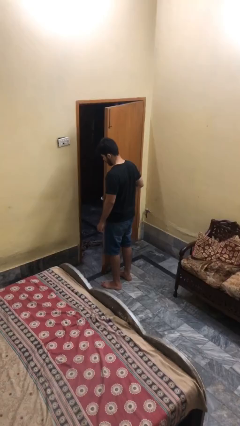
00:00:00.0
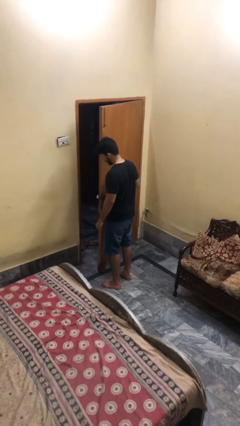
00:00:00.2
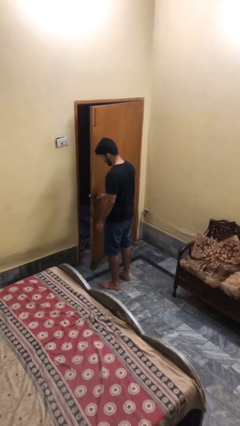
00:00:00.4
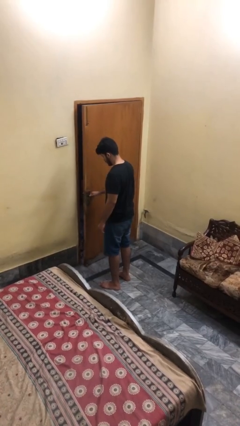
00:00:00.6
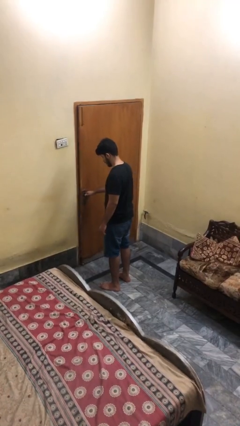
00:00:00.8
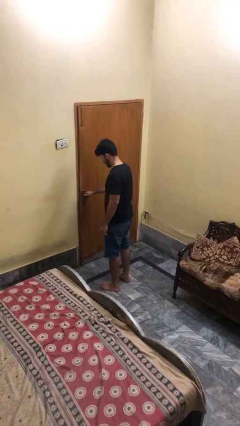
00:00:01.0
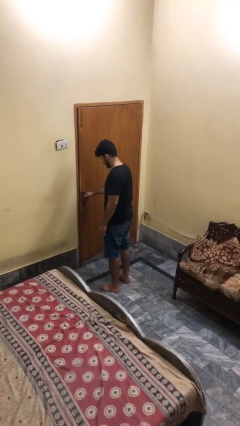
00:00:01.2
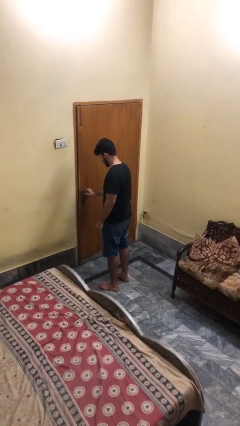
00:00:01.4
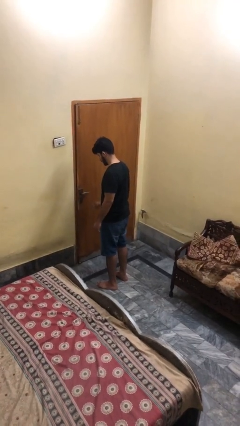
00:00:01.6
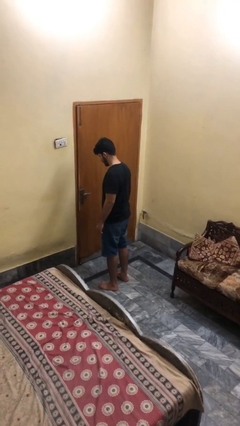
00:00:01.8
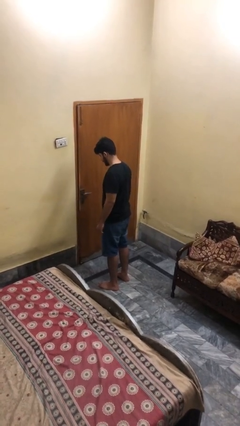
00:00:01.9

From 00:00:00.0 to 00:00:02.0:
person closes facility door

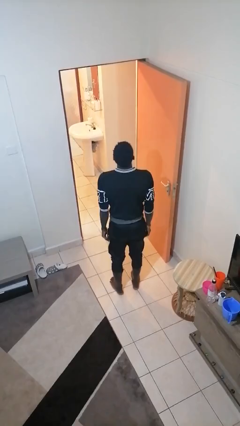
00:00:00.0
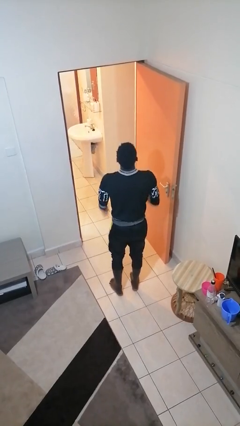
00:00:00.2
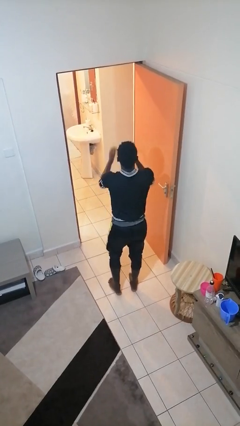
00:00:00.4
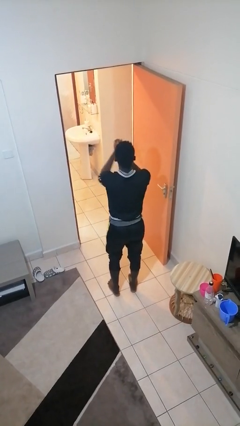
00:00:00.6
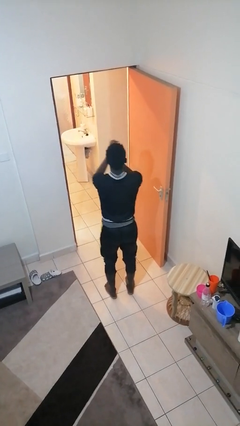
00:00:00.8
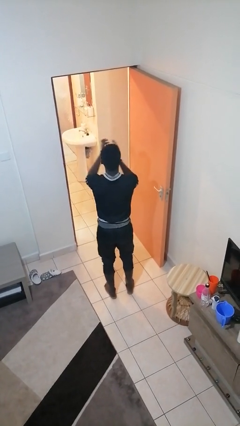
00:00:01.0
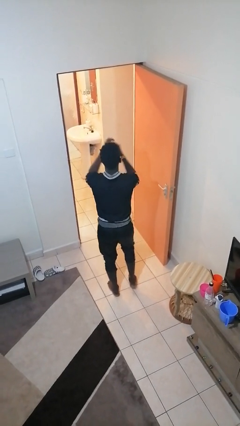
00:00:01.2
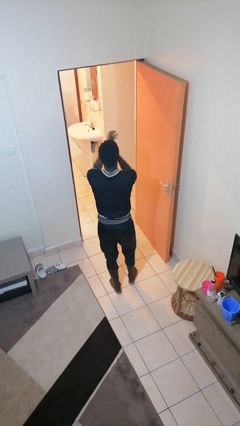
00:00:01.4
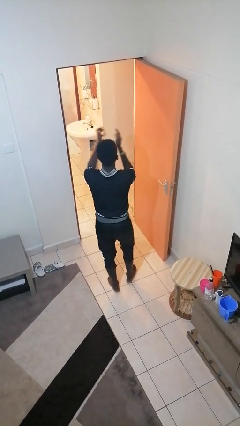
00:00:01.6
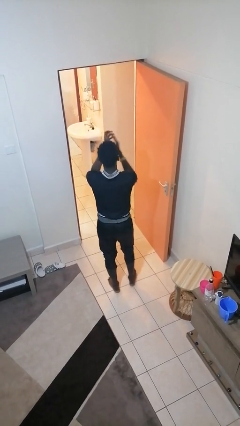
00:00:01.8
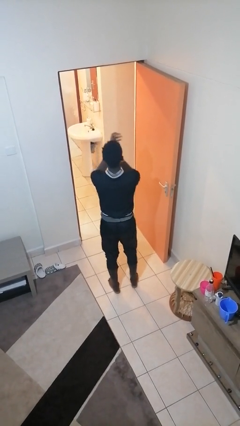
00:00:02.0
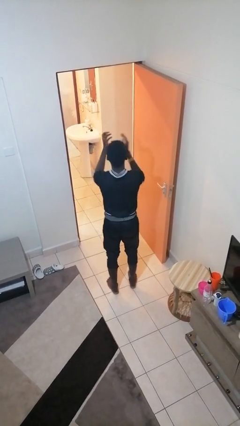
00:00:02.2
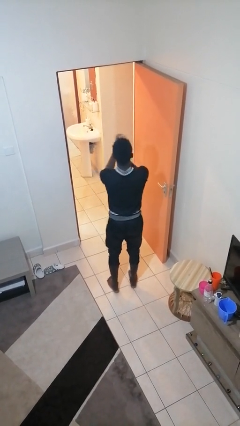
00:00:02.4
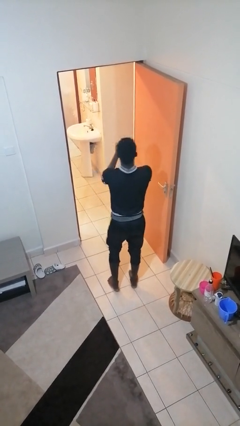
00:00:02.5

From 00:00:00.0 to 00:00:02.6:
person claps hands

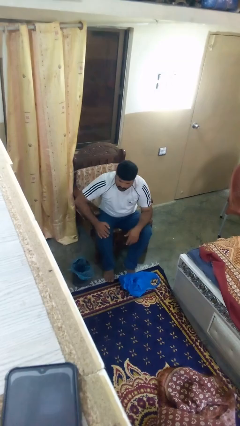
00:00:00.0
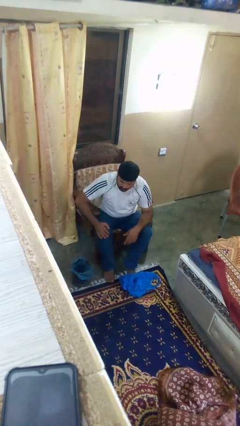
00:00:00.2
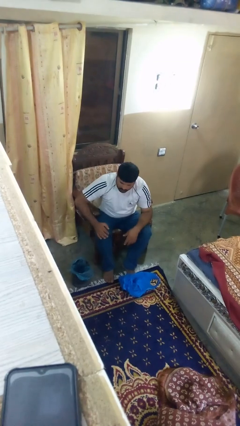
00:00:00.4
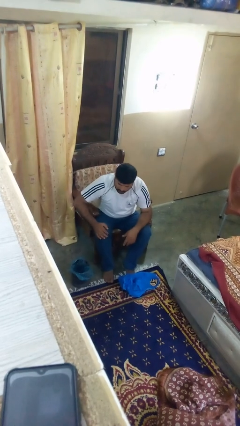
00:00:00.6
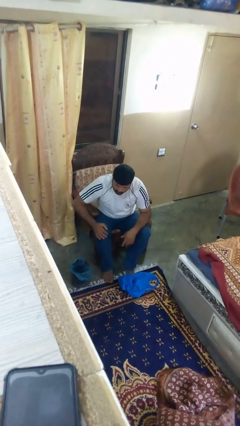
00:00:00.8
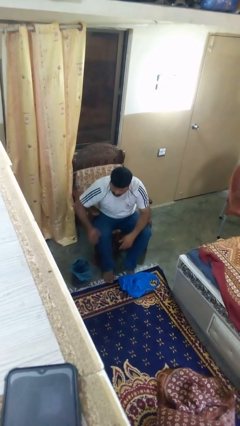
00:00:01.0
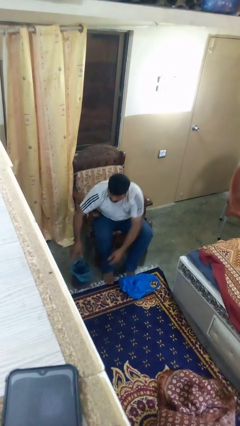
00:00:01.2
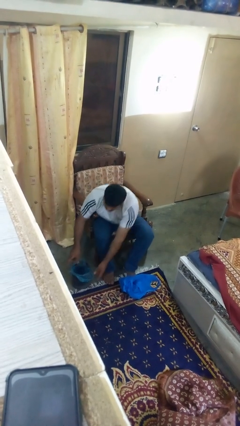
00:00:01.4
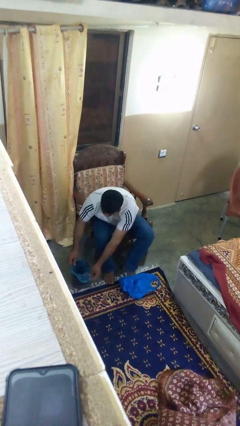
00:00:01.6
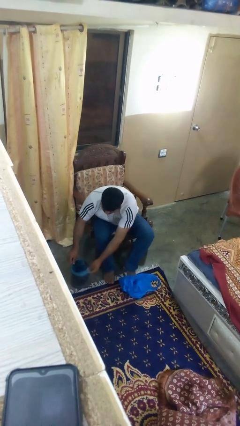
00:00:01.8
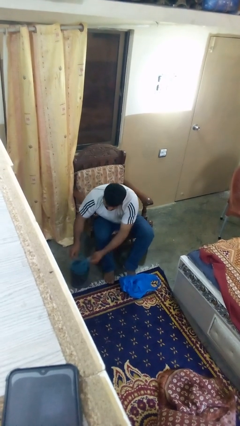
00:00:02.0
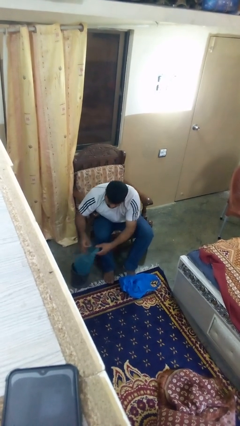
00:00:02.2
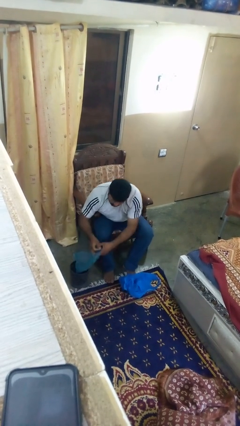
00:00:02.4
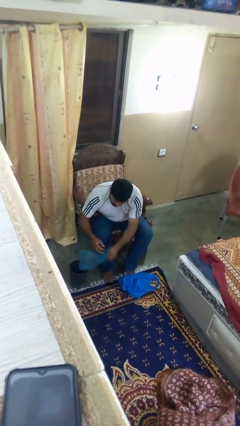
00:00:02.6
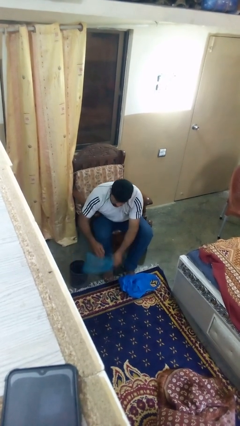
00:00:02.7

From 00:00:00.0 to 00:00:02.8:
person removes trashbag from trashcan

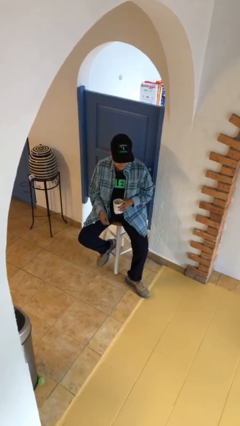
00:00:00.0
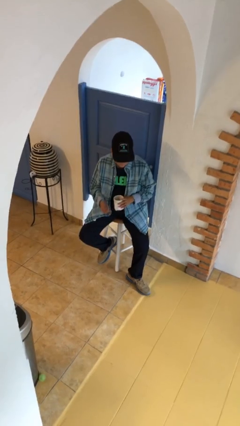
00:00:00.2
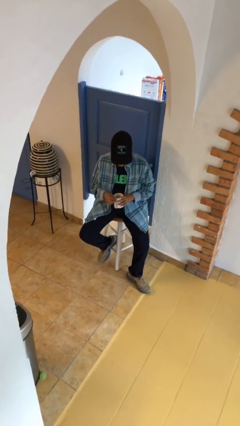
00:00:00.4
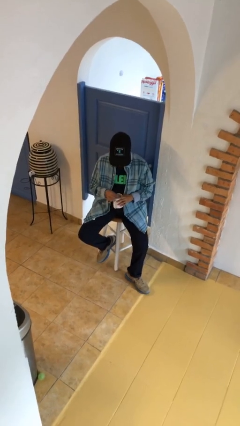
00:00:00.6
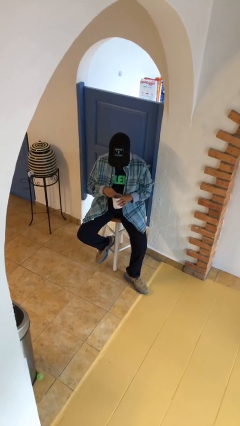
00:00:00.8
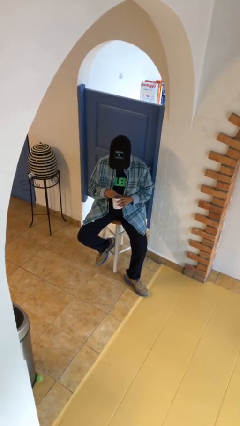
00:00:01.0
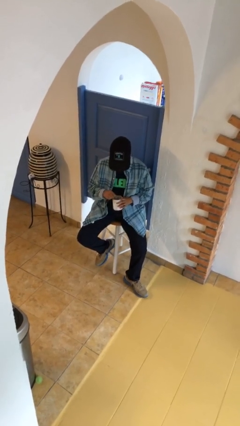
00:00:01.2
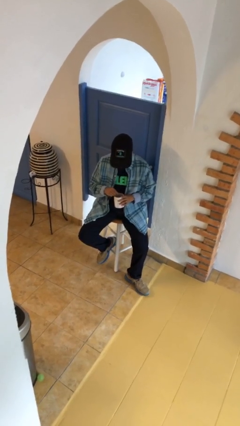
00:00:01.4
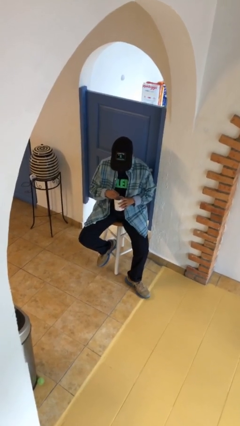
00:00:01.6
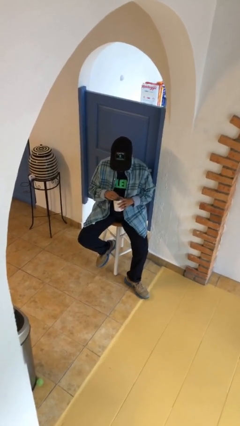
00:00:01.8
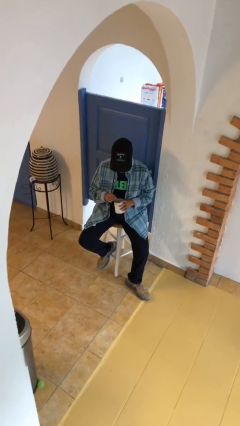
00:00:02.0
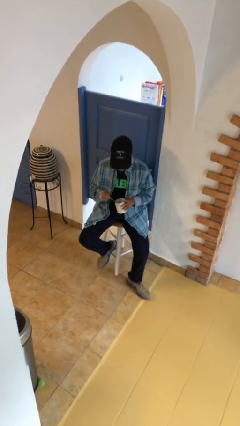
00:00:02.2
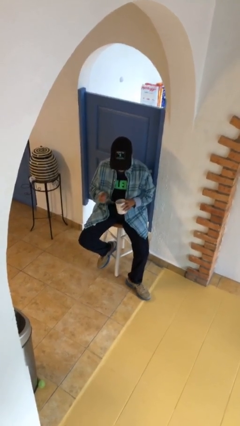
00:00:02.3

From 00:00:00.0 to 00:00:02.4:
person stirs mug

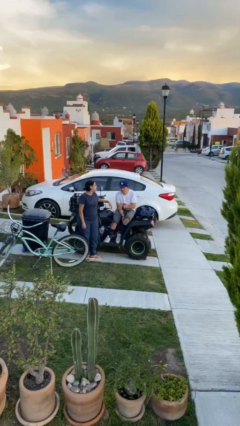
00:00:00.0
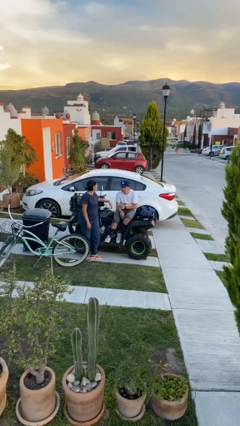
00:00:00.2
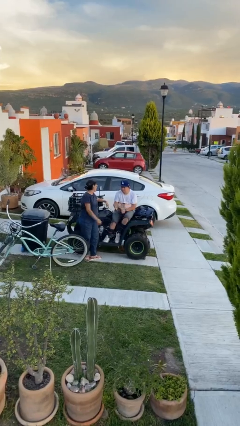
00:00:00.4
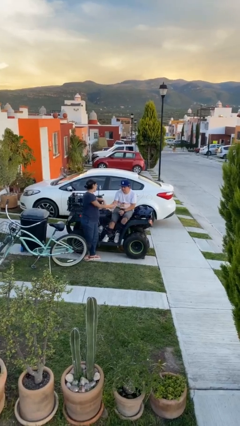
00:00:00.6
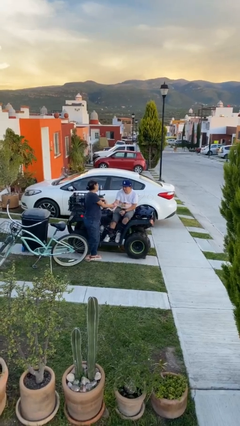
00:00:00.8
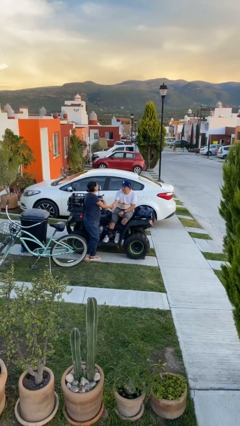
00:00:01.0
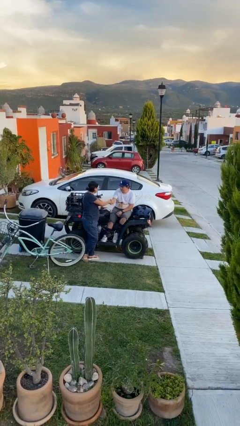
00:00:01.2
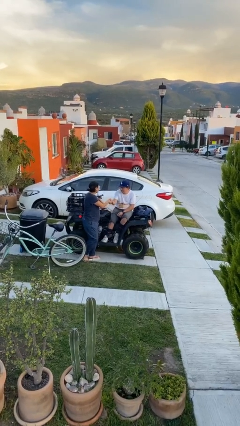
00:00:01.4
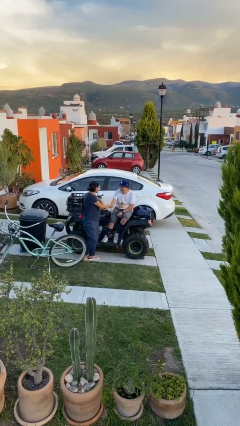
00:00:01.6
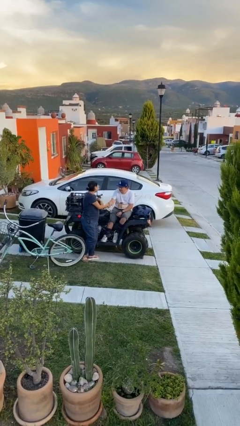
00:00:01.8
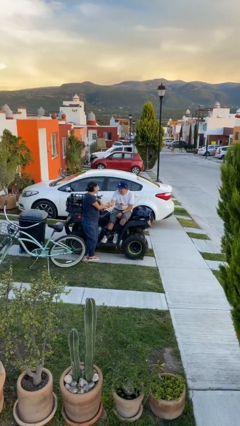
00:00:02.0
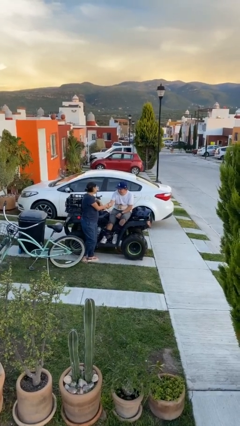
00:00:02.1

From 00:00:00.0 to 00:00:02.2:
person shakes hand

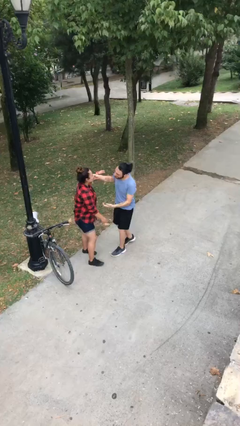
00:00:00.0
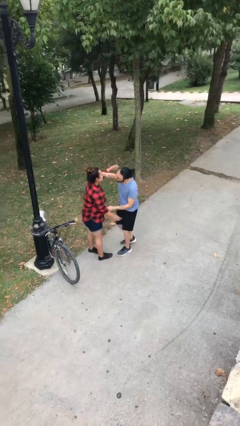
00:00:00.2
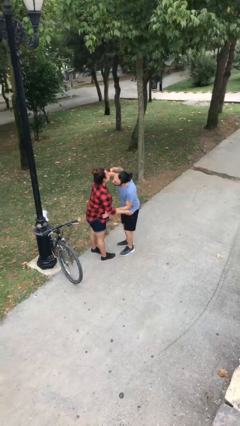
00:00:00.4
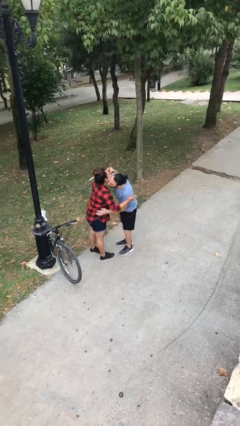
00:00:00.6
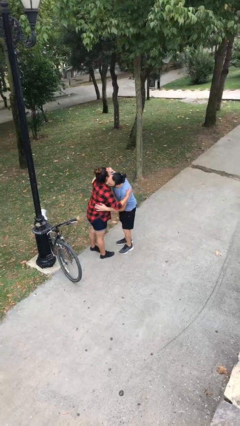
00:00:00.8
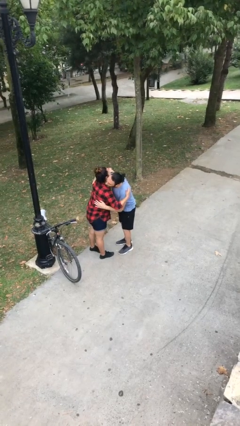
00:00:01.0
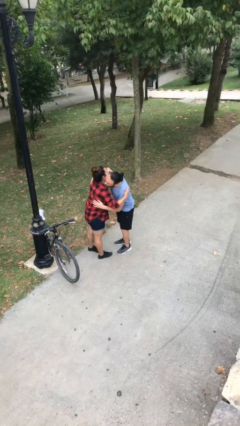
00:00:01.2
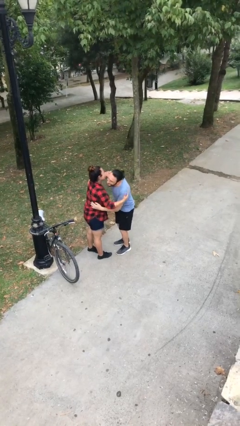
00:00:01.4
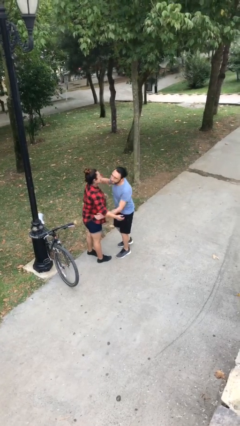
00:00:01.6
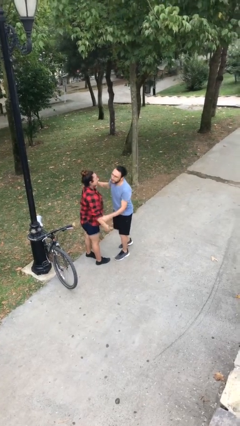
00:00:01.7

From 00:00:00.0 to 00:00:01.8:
person embraces person

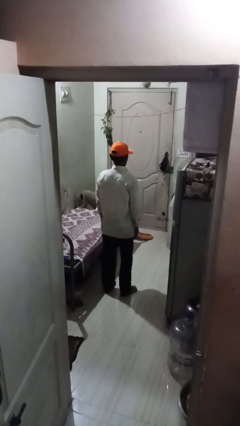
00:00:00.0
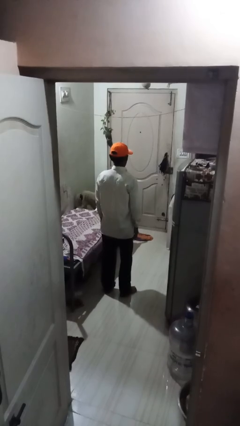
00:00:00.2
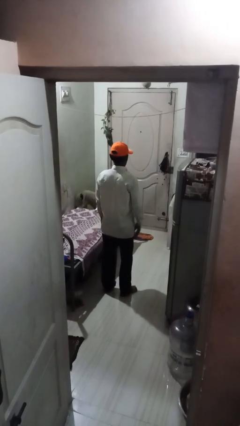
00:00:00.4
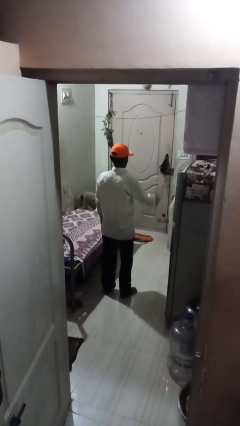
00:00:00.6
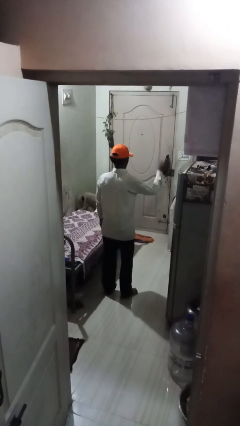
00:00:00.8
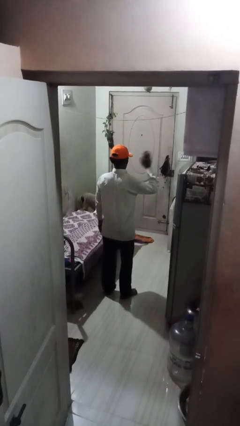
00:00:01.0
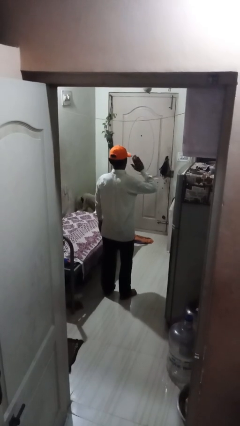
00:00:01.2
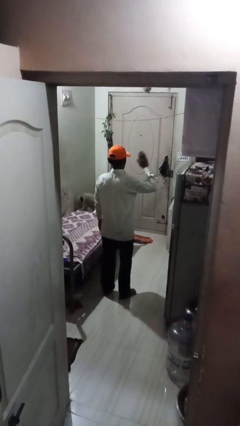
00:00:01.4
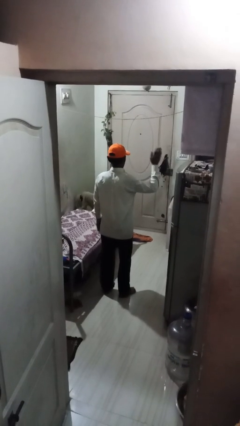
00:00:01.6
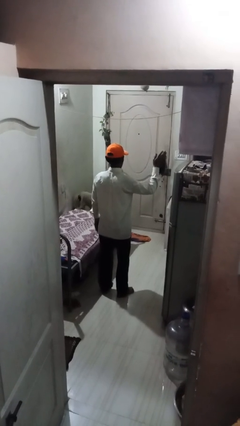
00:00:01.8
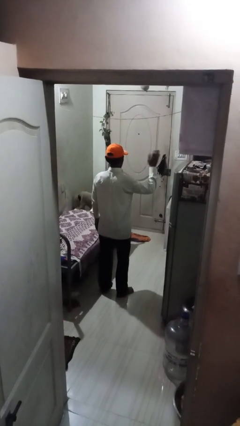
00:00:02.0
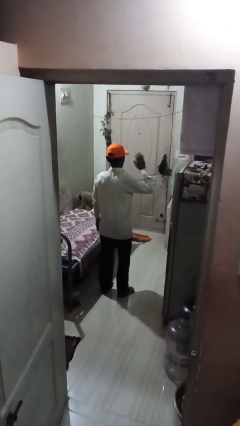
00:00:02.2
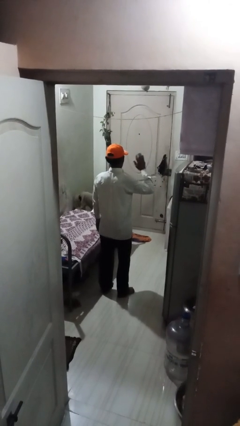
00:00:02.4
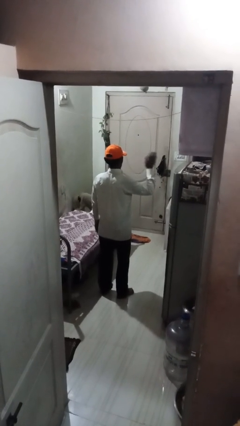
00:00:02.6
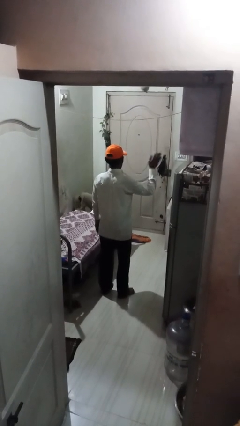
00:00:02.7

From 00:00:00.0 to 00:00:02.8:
person waves at person

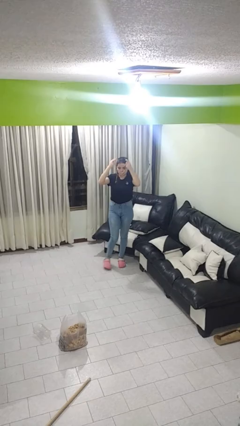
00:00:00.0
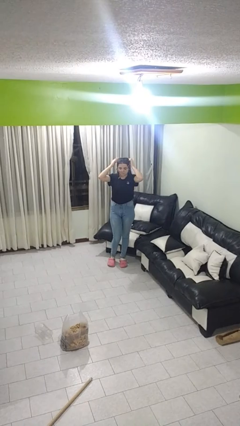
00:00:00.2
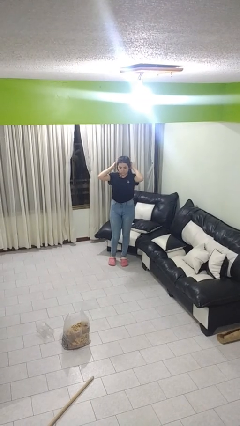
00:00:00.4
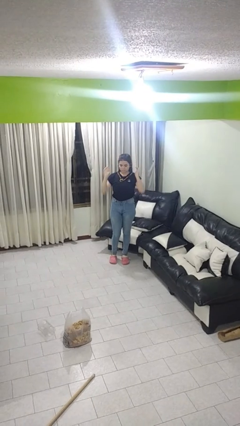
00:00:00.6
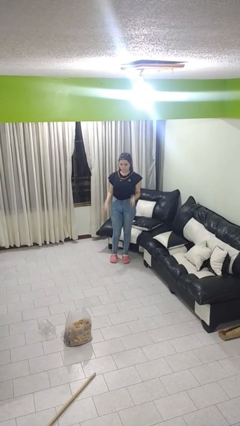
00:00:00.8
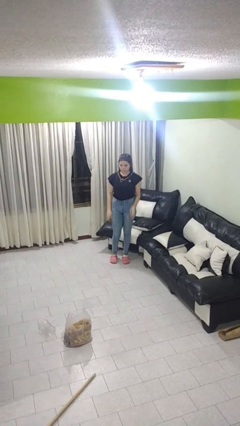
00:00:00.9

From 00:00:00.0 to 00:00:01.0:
person puts on necklace
